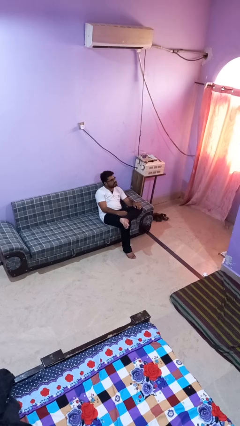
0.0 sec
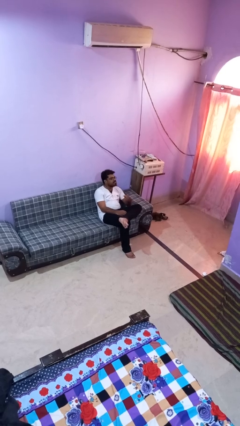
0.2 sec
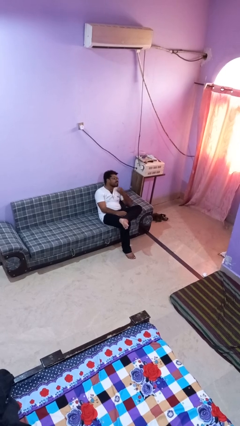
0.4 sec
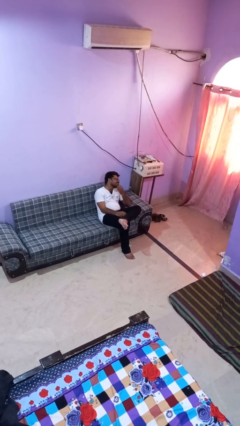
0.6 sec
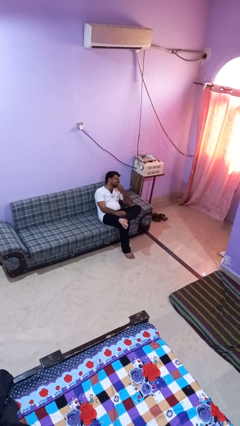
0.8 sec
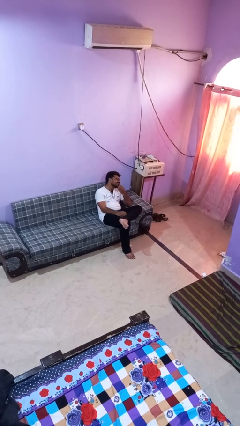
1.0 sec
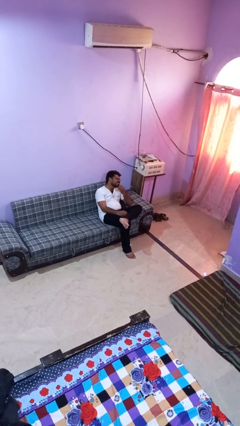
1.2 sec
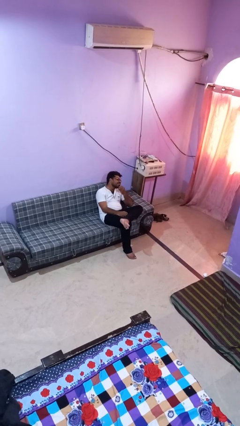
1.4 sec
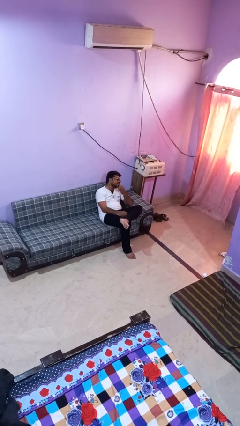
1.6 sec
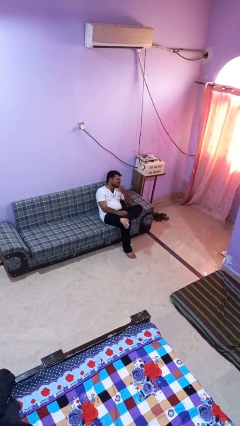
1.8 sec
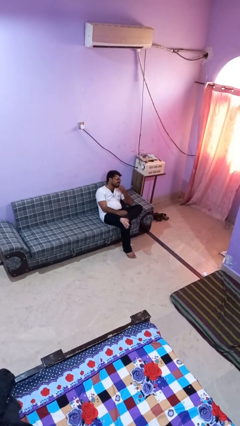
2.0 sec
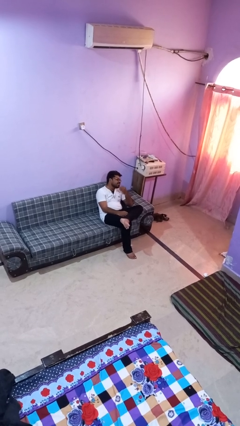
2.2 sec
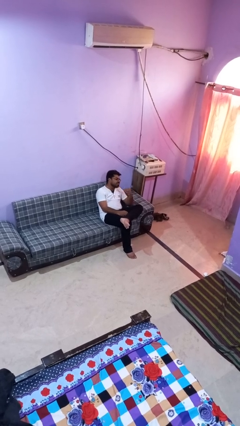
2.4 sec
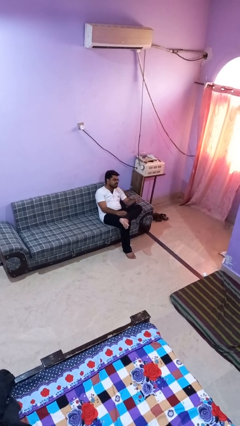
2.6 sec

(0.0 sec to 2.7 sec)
person strokes chin

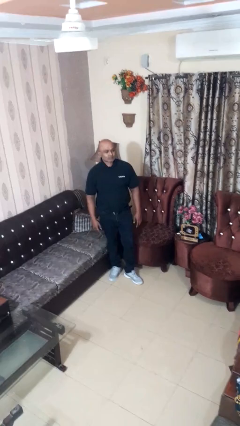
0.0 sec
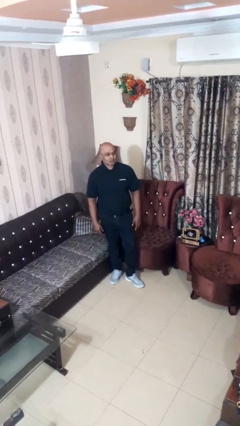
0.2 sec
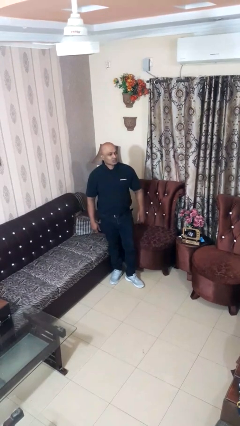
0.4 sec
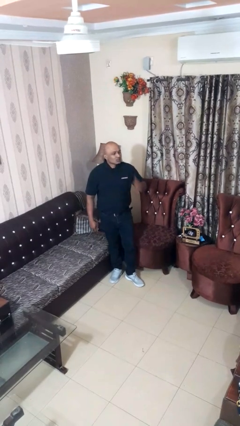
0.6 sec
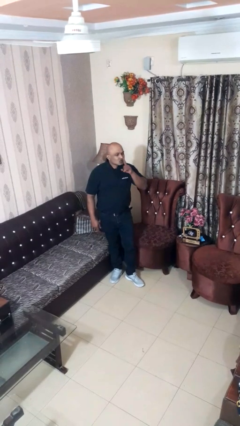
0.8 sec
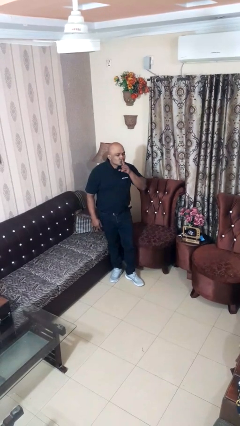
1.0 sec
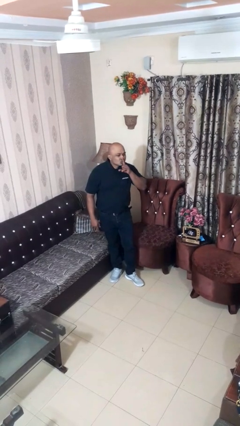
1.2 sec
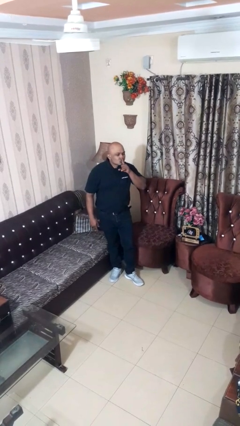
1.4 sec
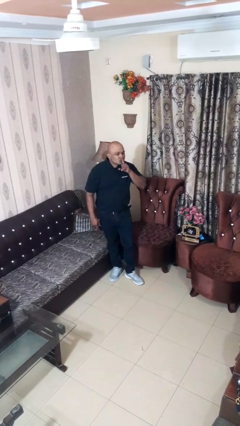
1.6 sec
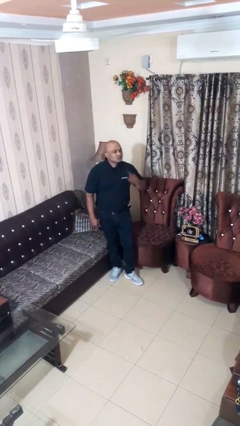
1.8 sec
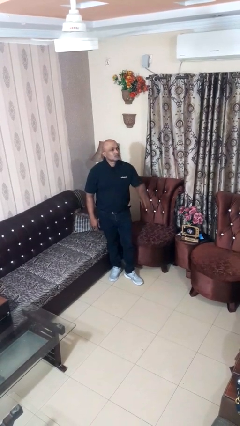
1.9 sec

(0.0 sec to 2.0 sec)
person gestures be quiet

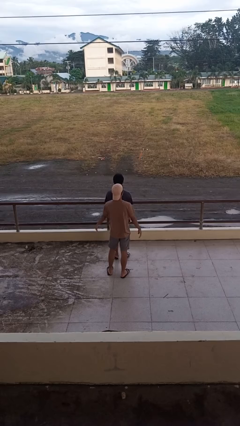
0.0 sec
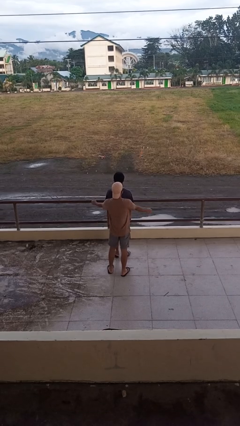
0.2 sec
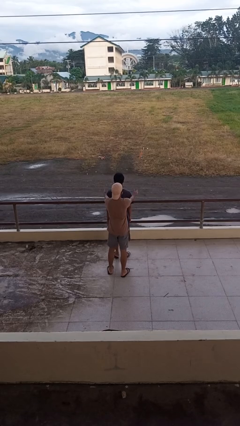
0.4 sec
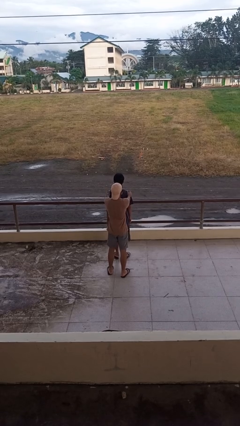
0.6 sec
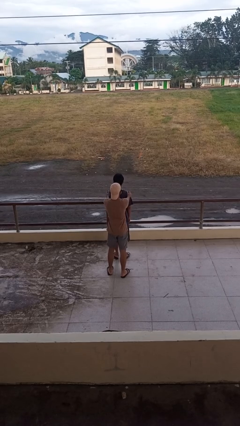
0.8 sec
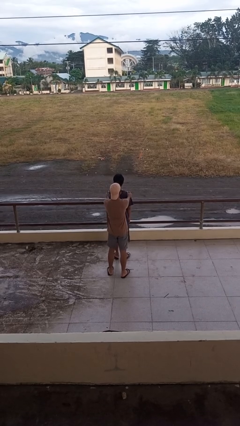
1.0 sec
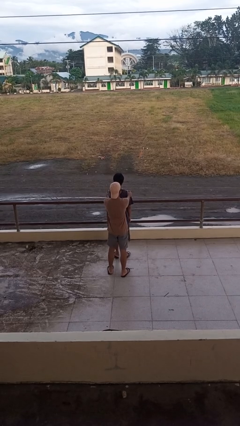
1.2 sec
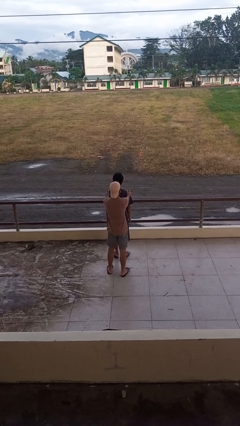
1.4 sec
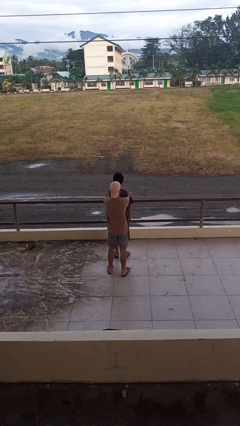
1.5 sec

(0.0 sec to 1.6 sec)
person pounds shoulders of person

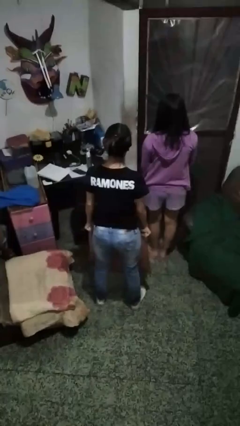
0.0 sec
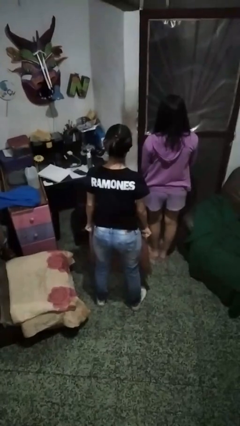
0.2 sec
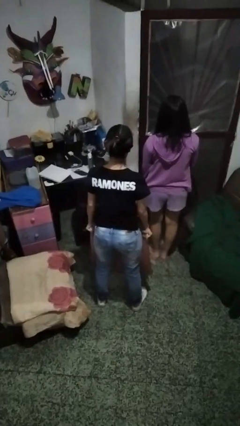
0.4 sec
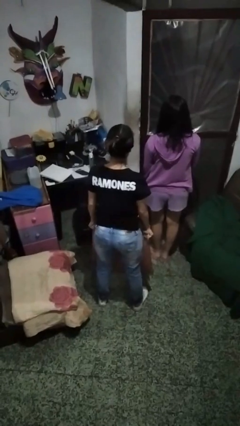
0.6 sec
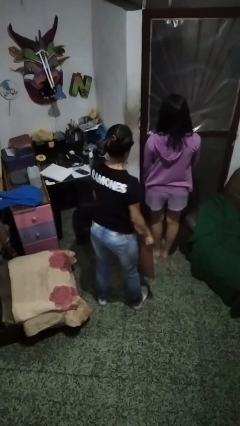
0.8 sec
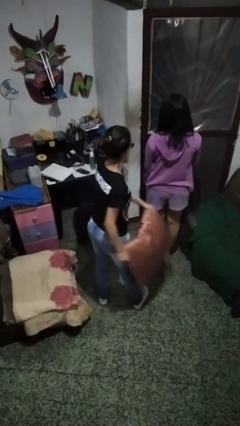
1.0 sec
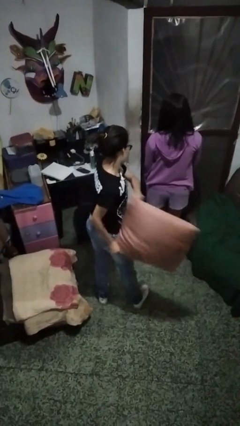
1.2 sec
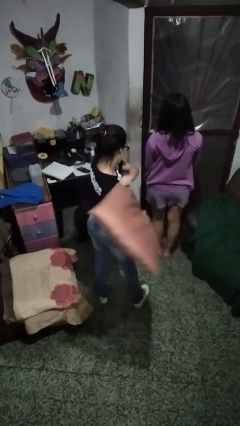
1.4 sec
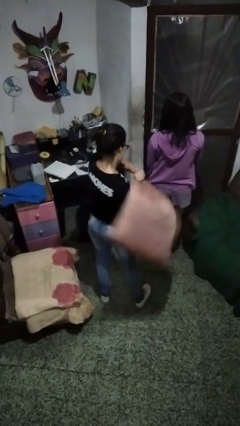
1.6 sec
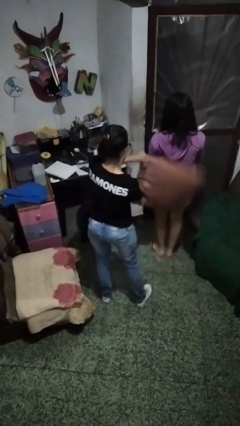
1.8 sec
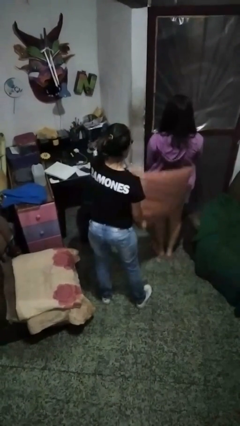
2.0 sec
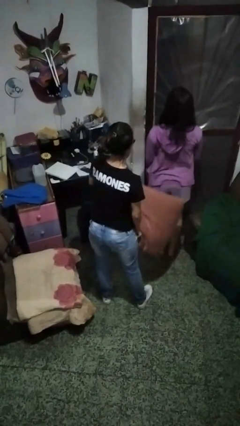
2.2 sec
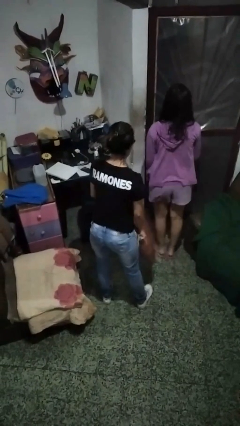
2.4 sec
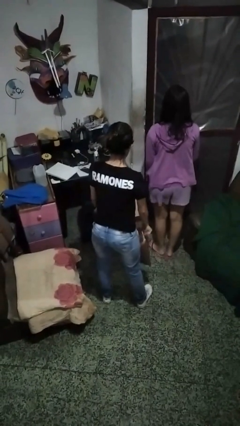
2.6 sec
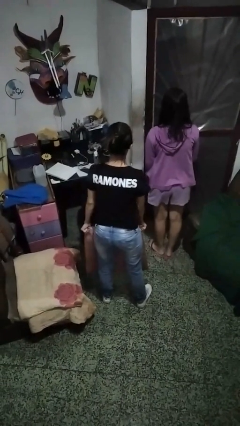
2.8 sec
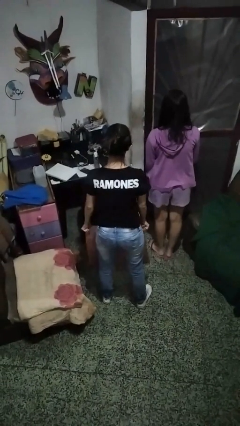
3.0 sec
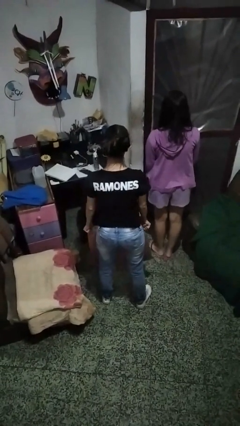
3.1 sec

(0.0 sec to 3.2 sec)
person hits person with pillow

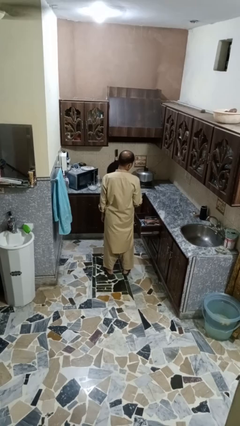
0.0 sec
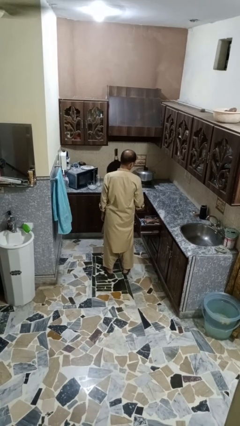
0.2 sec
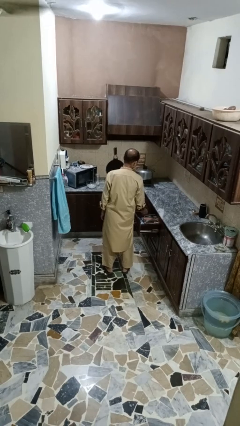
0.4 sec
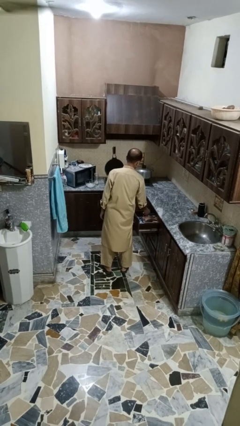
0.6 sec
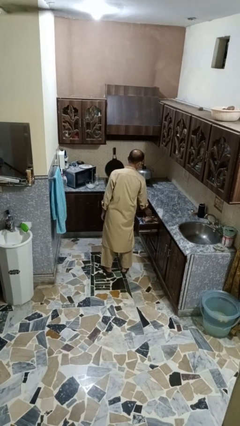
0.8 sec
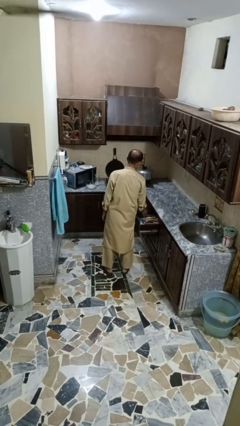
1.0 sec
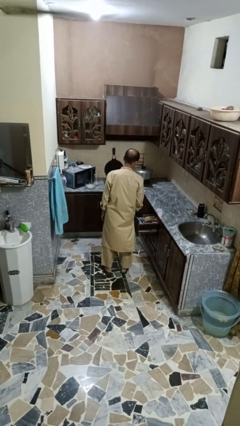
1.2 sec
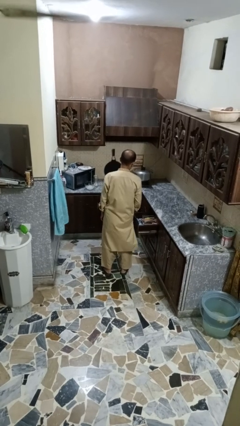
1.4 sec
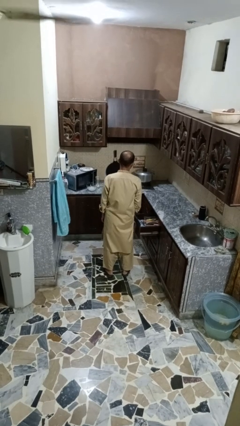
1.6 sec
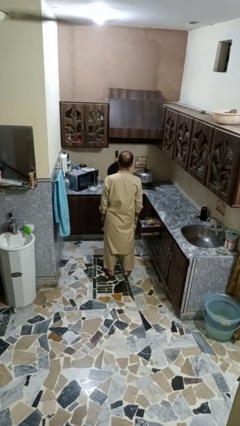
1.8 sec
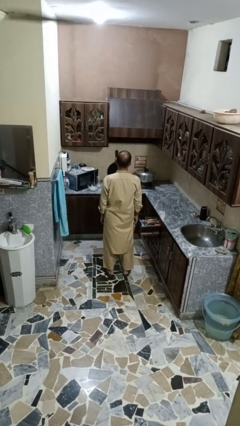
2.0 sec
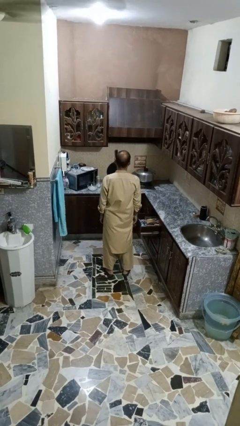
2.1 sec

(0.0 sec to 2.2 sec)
person puts object into kitchen drawer

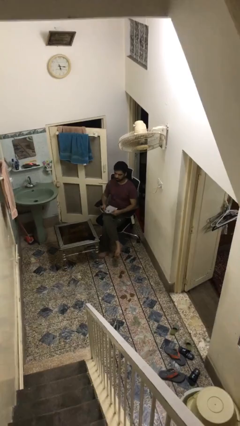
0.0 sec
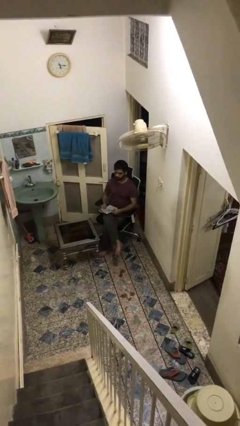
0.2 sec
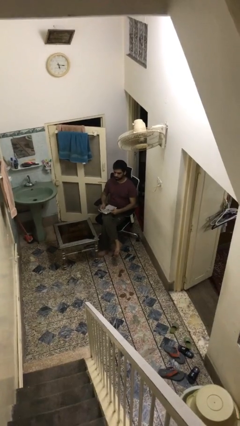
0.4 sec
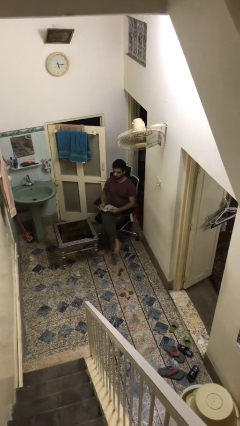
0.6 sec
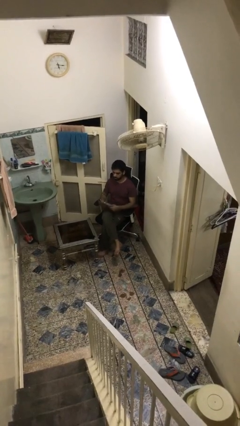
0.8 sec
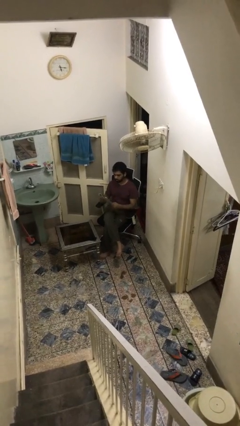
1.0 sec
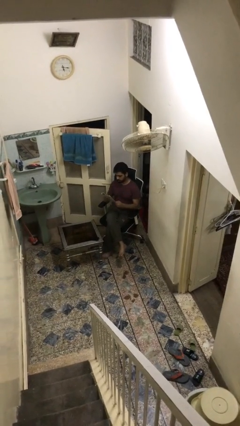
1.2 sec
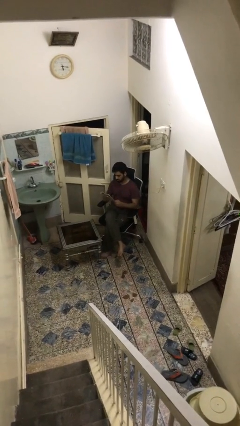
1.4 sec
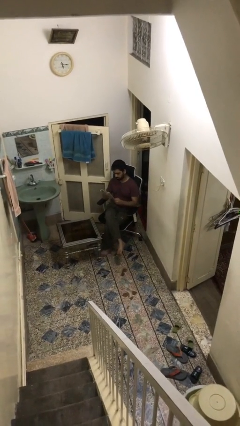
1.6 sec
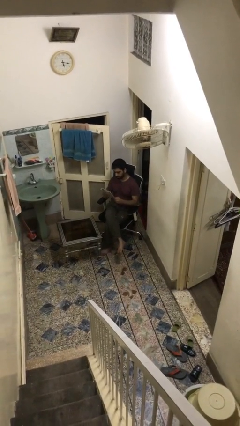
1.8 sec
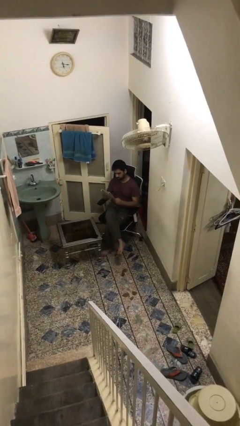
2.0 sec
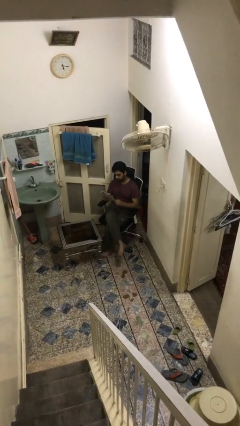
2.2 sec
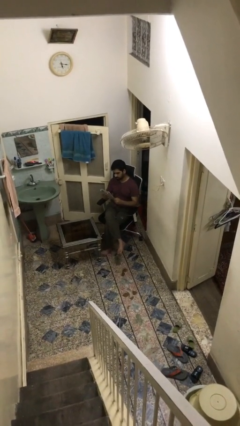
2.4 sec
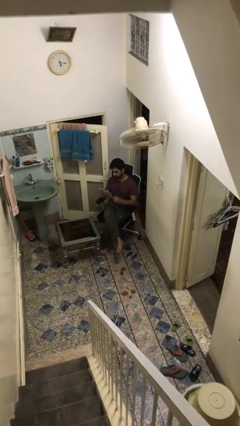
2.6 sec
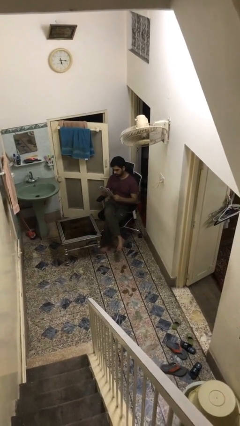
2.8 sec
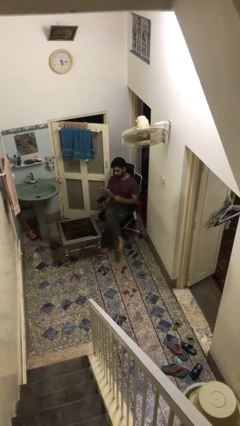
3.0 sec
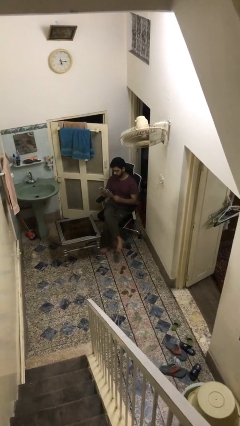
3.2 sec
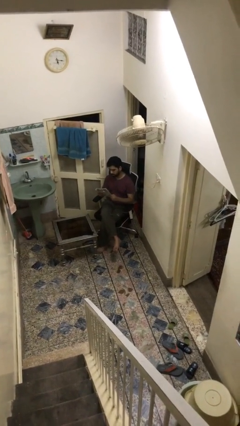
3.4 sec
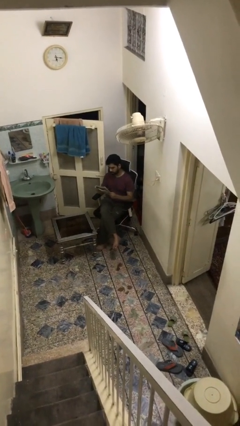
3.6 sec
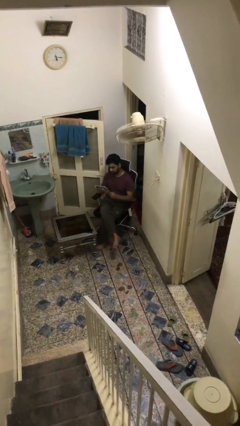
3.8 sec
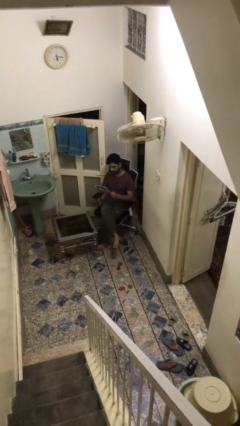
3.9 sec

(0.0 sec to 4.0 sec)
person reads document

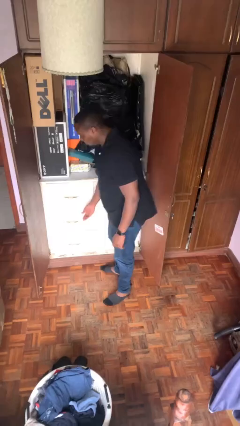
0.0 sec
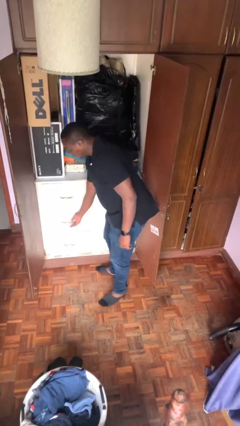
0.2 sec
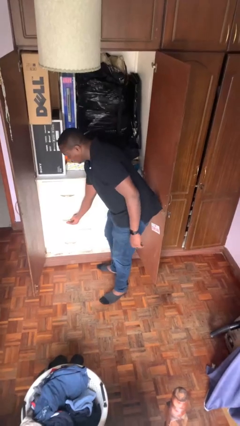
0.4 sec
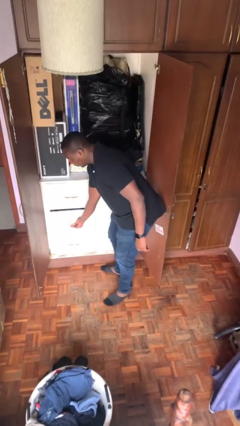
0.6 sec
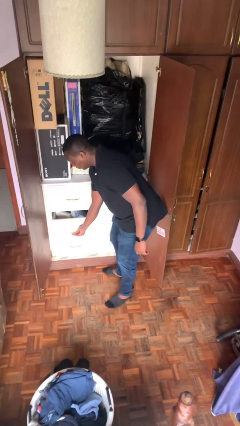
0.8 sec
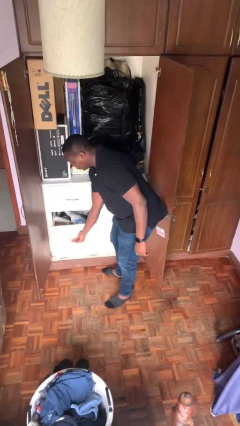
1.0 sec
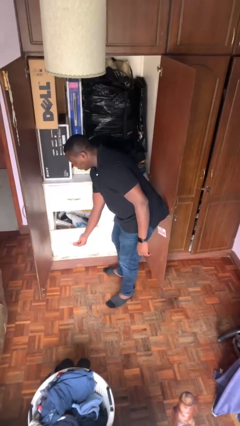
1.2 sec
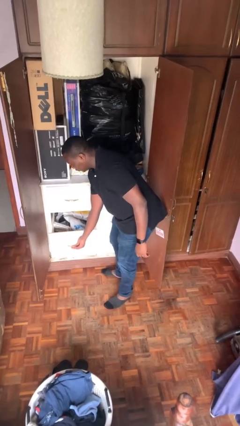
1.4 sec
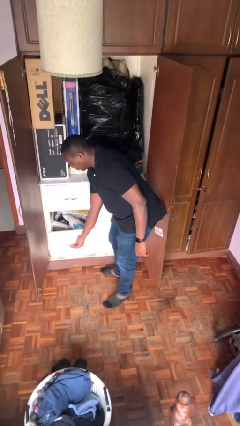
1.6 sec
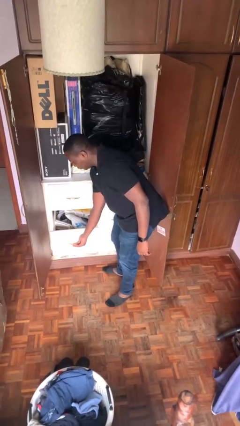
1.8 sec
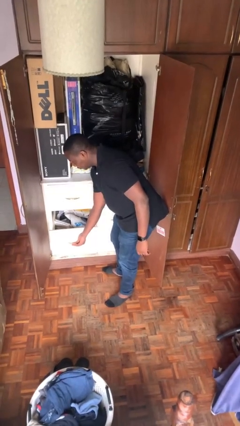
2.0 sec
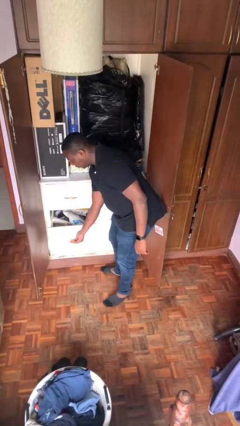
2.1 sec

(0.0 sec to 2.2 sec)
person opens dresser drawer
